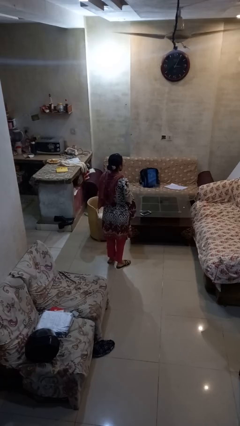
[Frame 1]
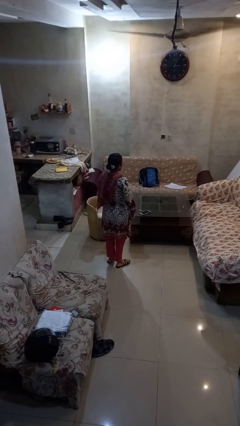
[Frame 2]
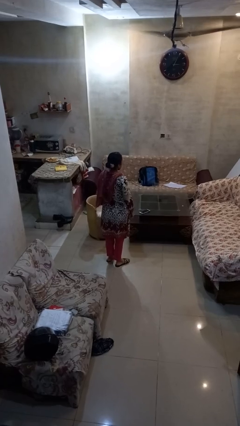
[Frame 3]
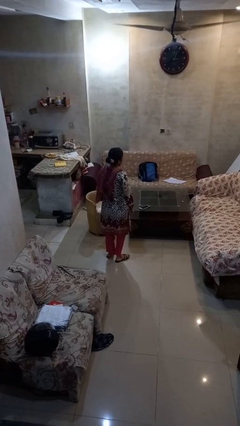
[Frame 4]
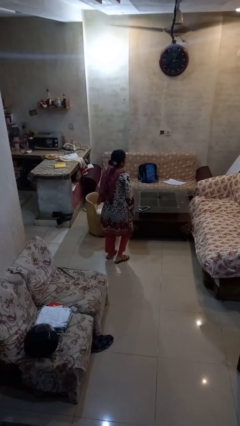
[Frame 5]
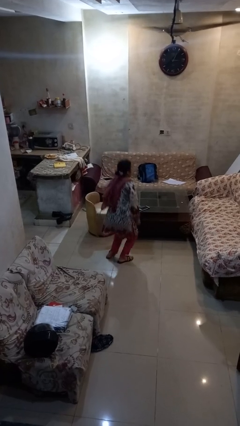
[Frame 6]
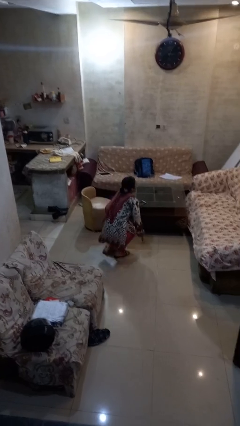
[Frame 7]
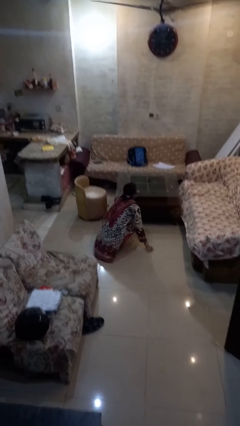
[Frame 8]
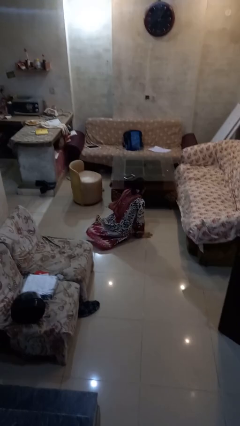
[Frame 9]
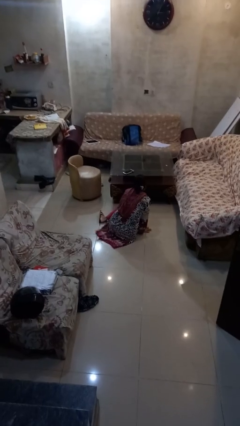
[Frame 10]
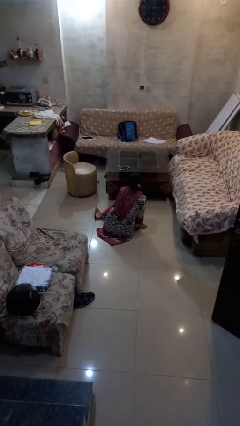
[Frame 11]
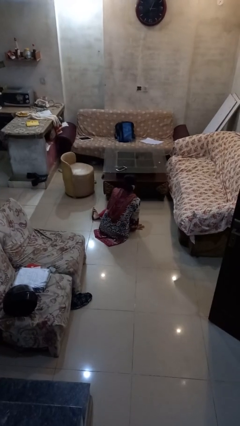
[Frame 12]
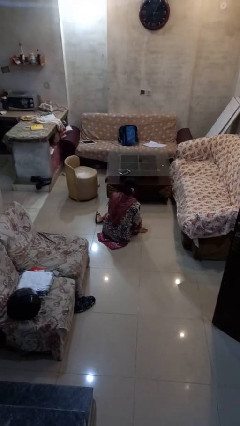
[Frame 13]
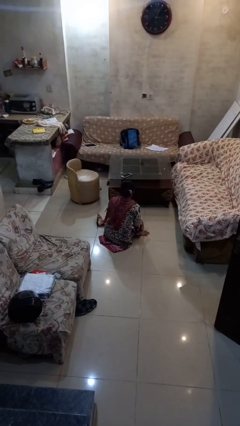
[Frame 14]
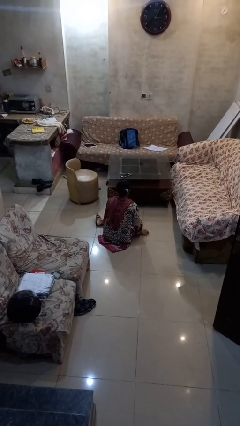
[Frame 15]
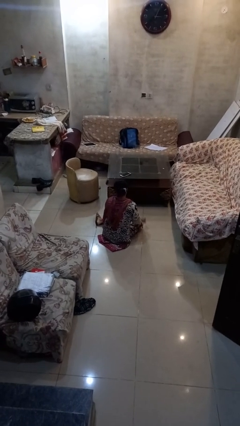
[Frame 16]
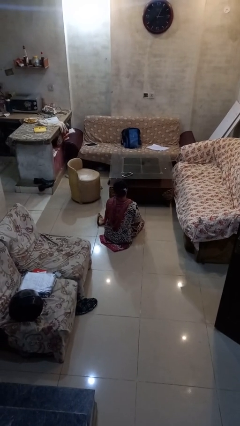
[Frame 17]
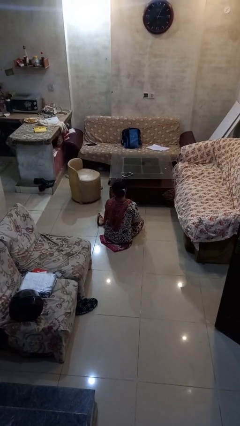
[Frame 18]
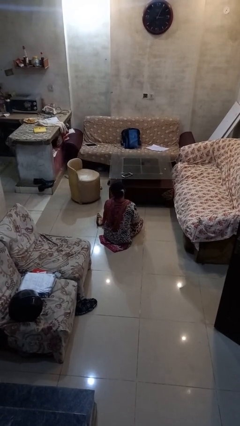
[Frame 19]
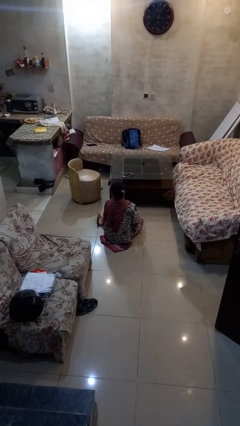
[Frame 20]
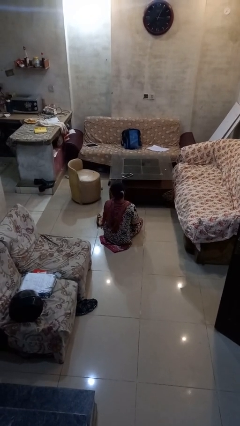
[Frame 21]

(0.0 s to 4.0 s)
person falls while standing

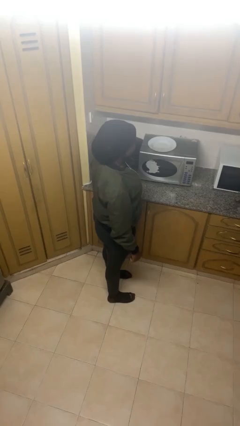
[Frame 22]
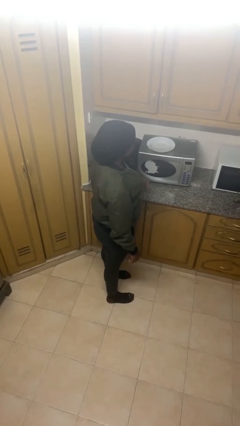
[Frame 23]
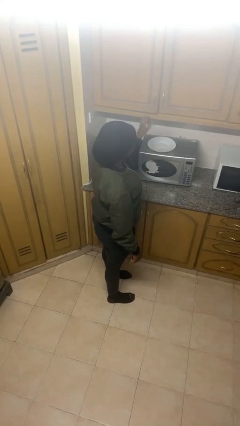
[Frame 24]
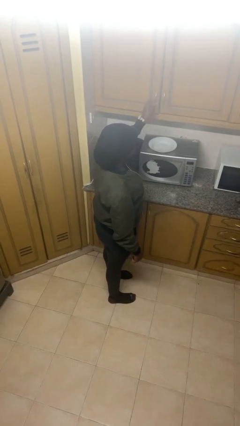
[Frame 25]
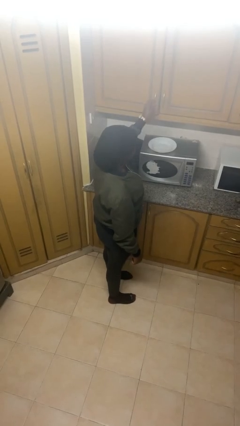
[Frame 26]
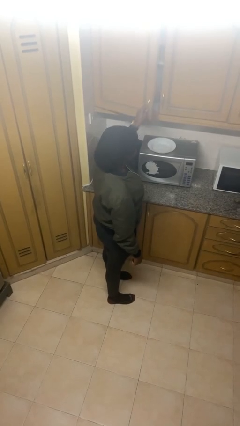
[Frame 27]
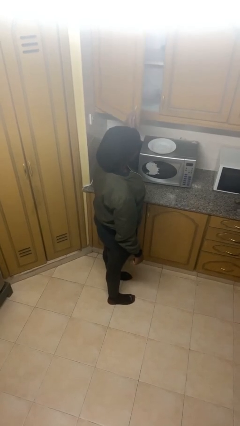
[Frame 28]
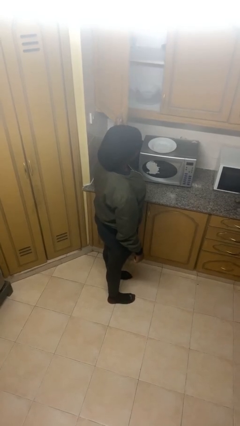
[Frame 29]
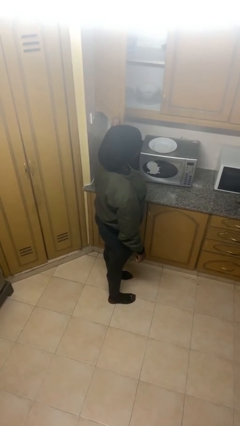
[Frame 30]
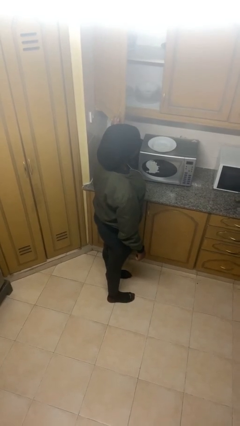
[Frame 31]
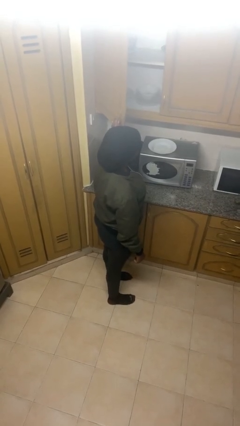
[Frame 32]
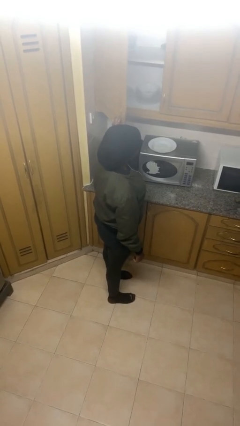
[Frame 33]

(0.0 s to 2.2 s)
person opens cabinet

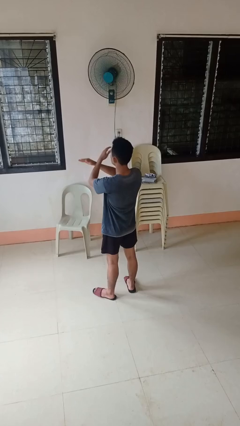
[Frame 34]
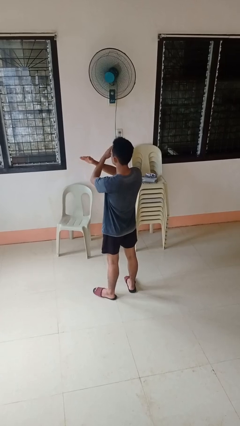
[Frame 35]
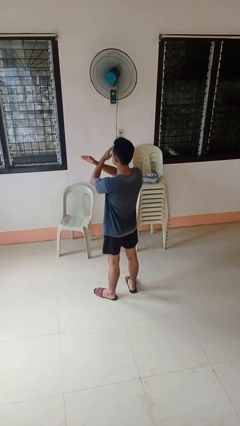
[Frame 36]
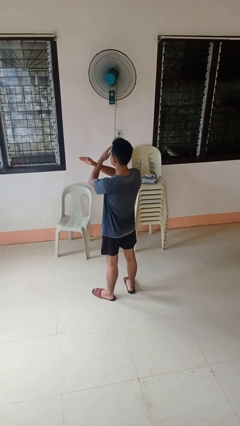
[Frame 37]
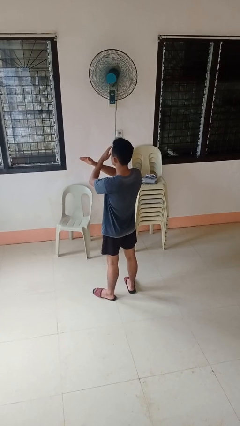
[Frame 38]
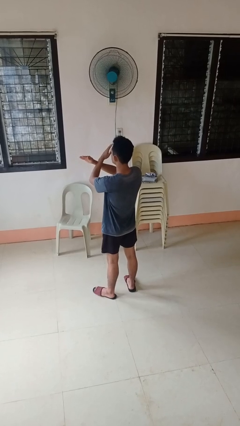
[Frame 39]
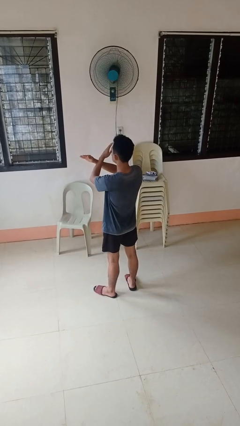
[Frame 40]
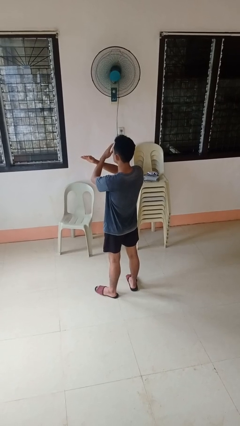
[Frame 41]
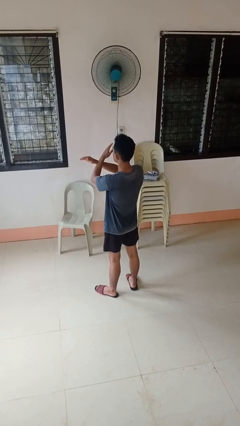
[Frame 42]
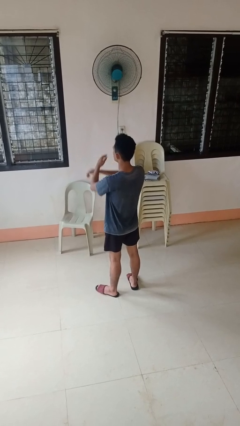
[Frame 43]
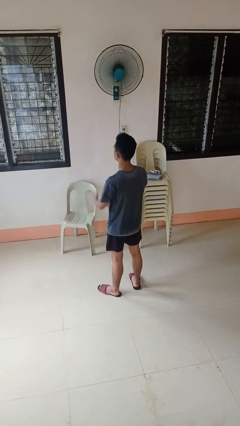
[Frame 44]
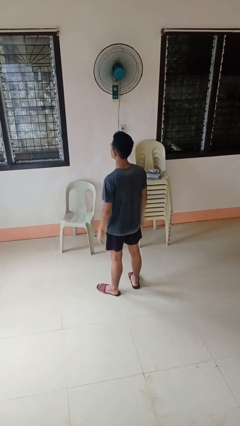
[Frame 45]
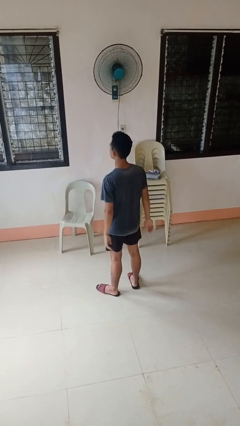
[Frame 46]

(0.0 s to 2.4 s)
person gestures arms x

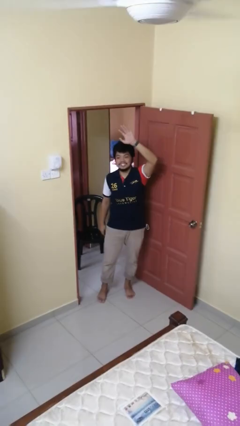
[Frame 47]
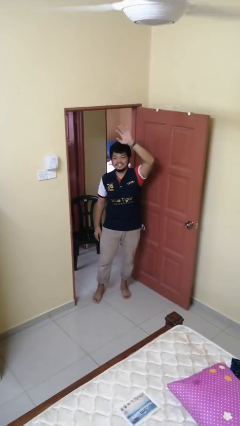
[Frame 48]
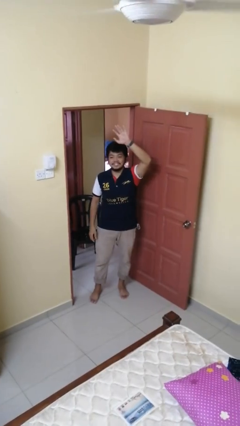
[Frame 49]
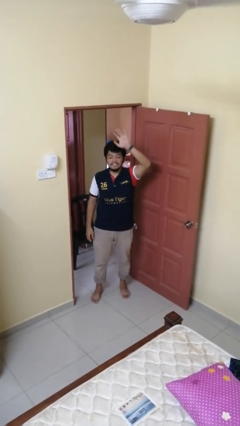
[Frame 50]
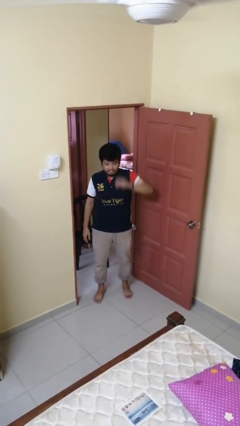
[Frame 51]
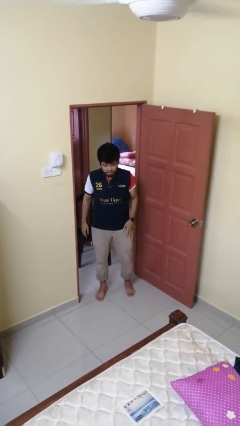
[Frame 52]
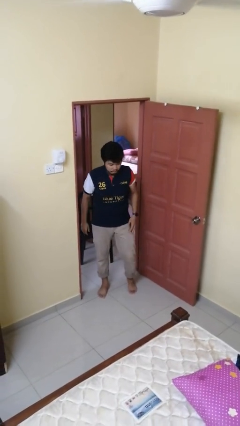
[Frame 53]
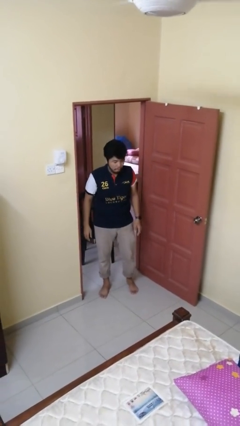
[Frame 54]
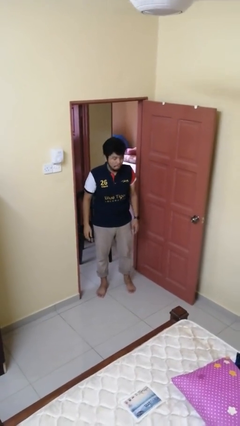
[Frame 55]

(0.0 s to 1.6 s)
person gestures lower hand

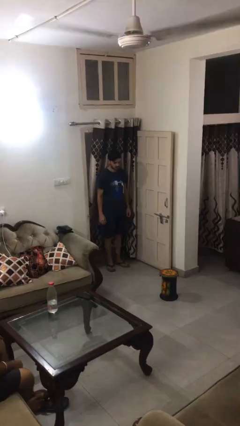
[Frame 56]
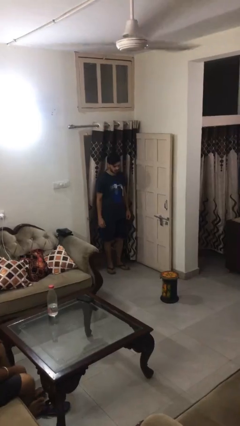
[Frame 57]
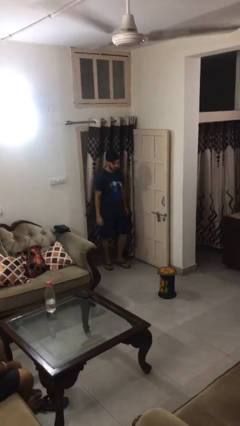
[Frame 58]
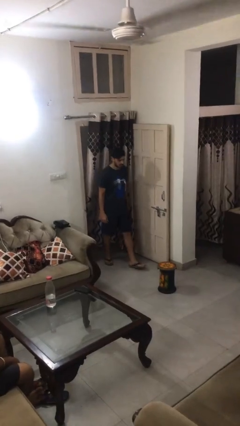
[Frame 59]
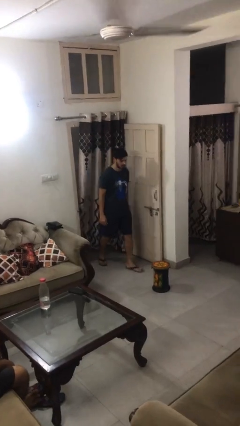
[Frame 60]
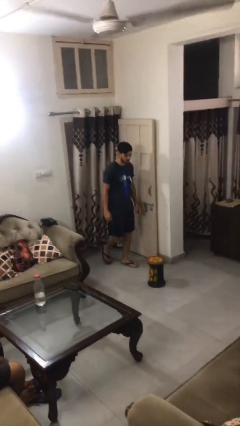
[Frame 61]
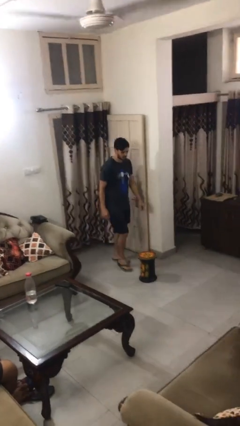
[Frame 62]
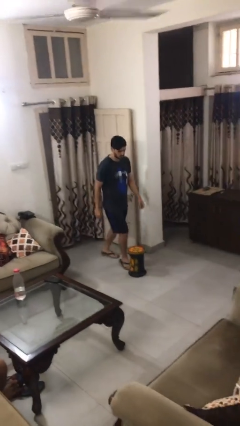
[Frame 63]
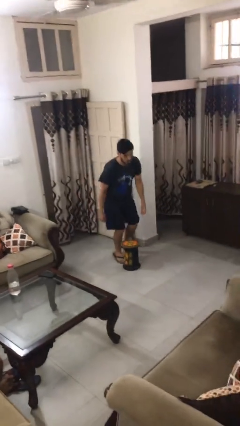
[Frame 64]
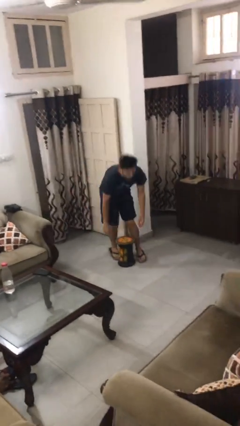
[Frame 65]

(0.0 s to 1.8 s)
person trips on object on floor

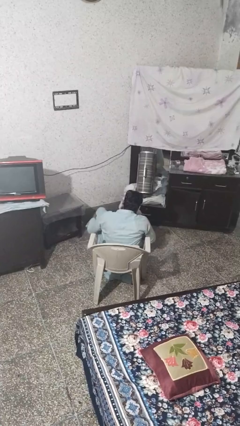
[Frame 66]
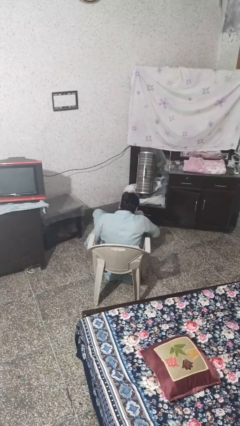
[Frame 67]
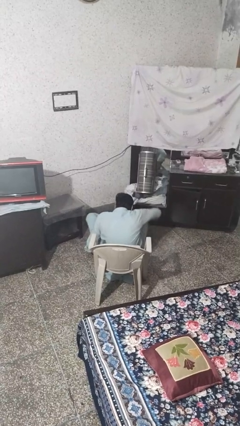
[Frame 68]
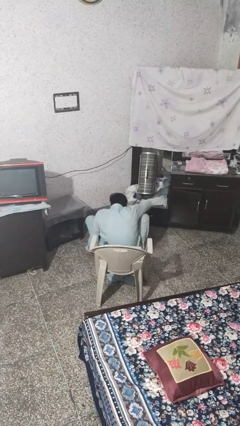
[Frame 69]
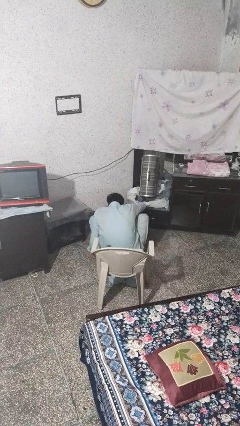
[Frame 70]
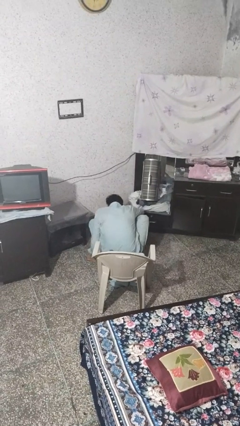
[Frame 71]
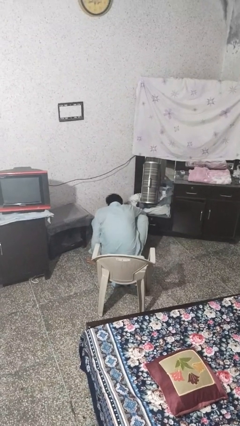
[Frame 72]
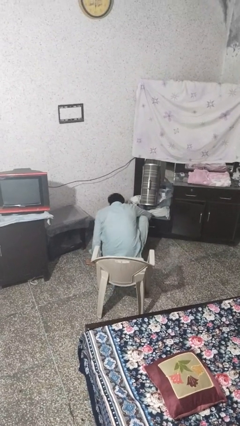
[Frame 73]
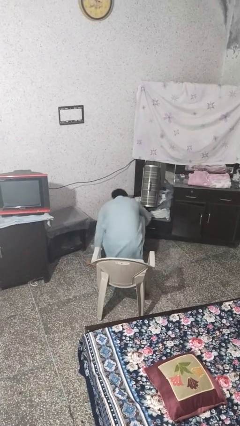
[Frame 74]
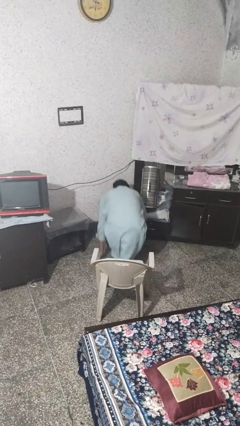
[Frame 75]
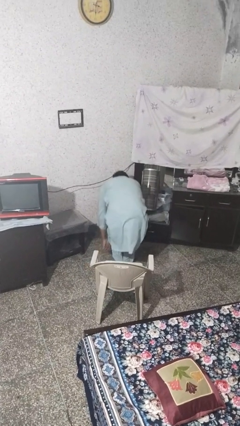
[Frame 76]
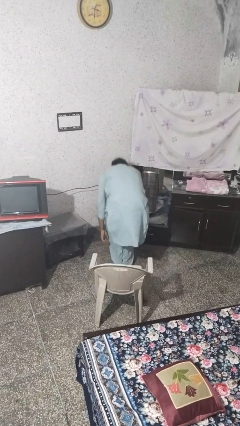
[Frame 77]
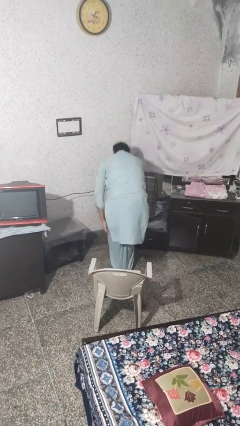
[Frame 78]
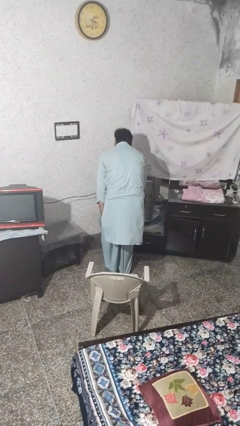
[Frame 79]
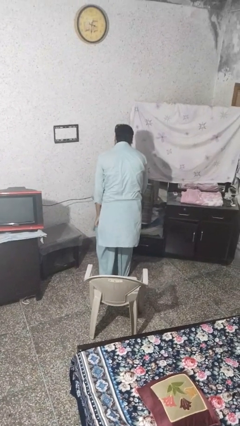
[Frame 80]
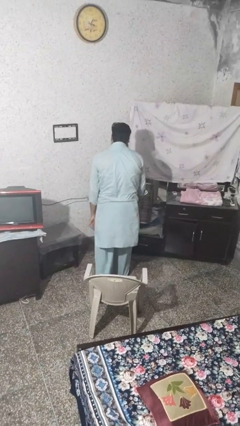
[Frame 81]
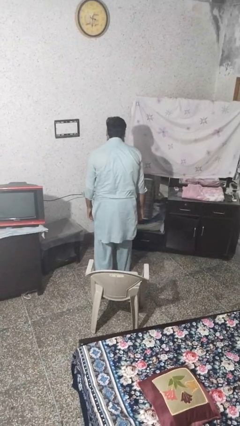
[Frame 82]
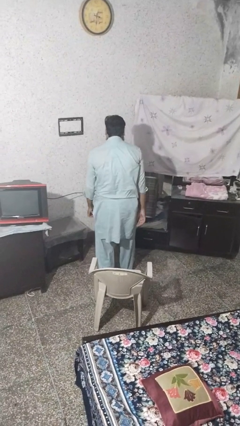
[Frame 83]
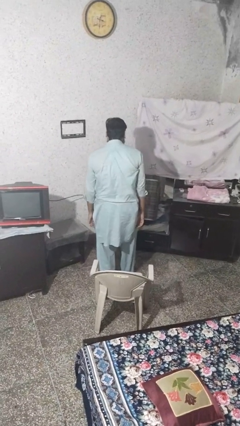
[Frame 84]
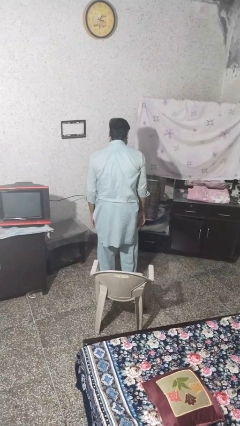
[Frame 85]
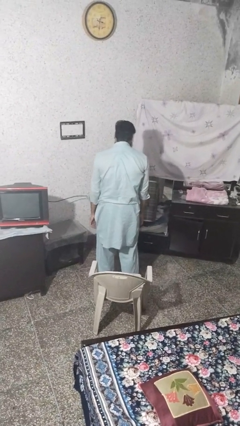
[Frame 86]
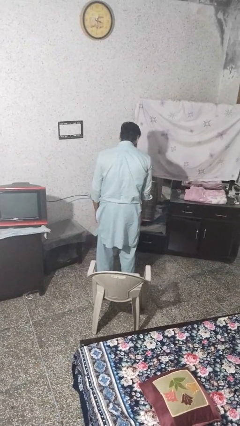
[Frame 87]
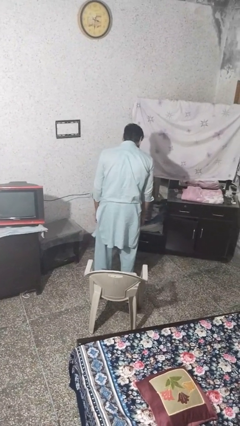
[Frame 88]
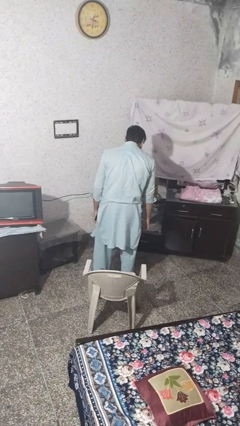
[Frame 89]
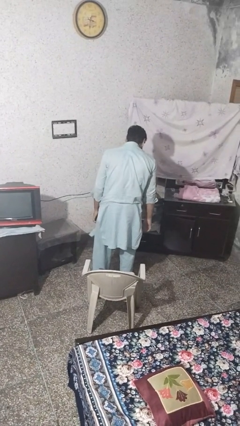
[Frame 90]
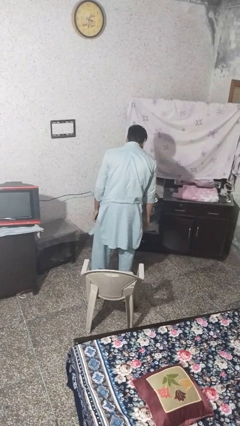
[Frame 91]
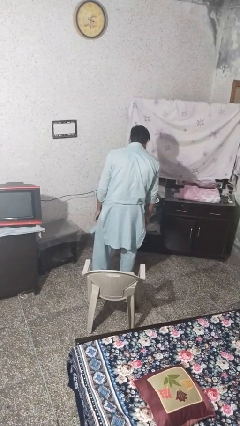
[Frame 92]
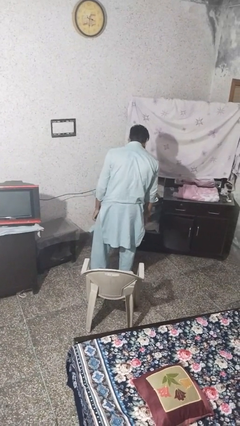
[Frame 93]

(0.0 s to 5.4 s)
person stands up from floor
